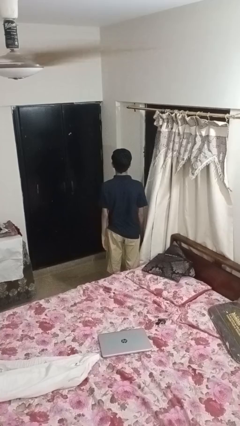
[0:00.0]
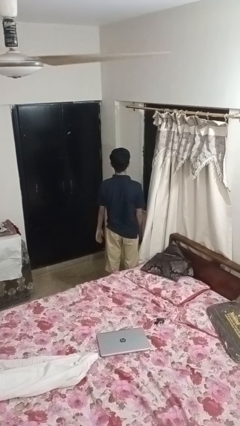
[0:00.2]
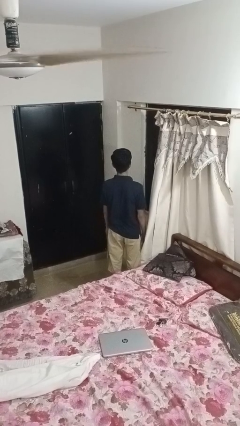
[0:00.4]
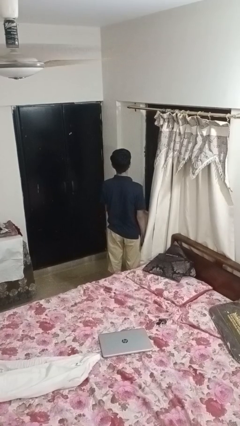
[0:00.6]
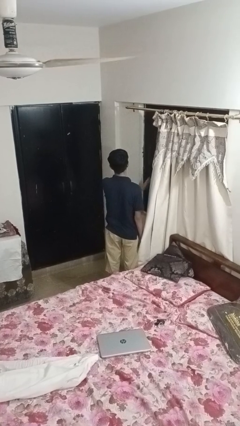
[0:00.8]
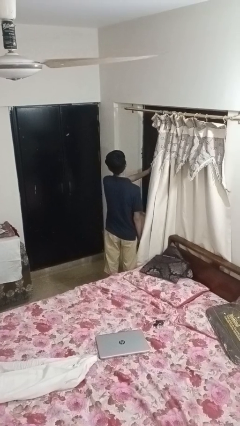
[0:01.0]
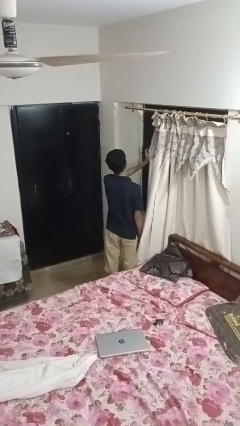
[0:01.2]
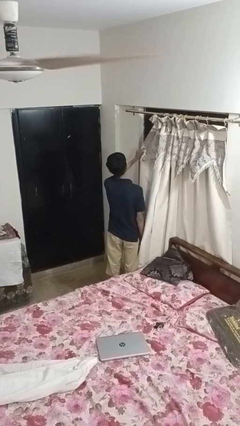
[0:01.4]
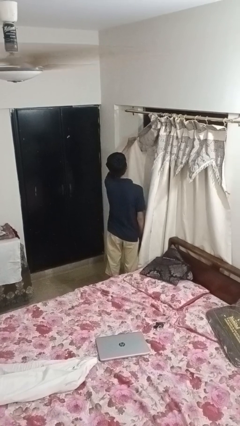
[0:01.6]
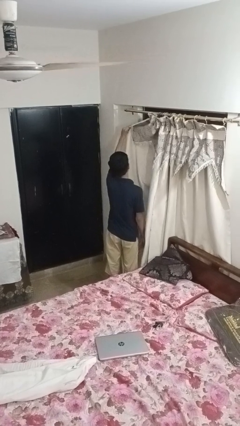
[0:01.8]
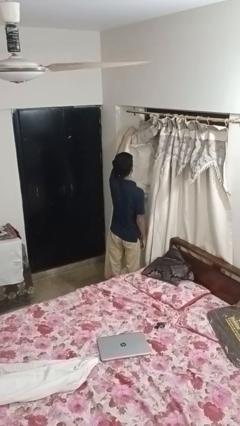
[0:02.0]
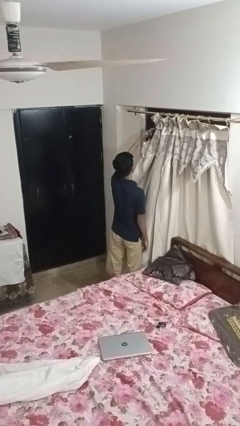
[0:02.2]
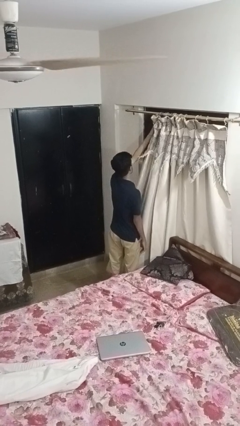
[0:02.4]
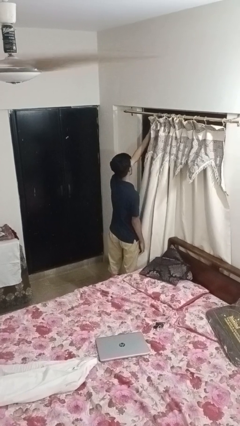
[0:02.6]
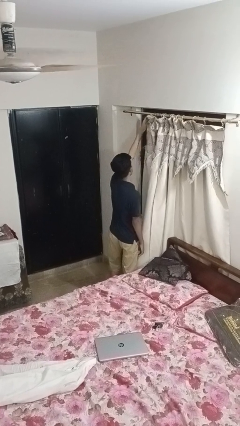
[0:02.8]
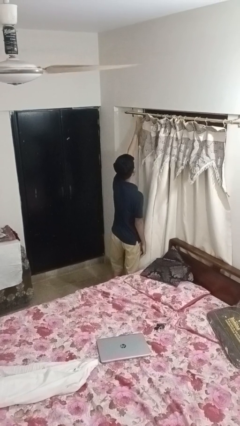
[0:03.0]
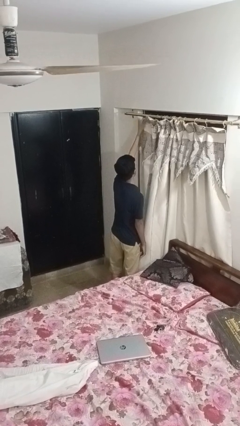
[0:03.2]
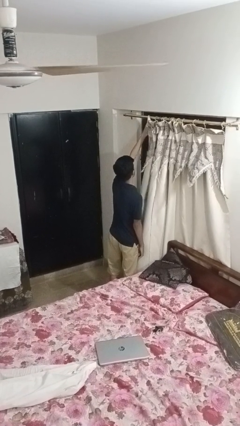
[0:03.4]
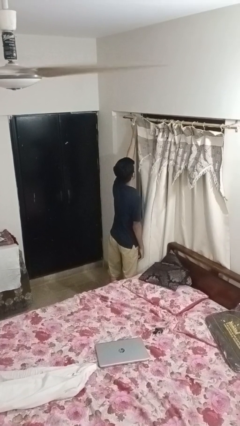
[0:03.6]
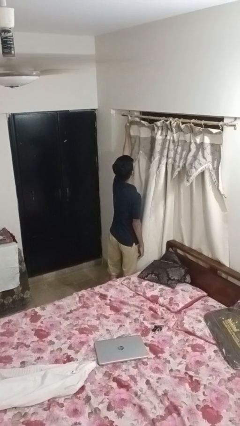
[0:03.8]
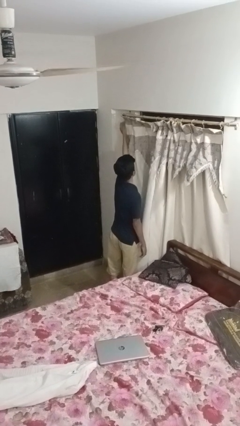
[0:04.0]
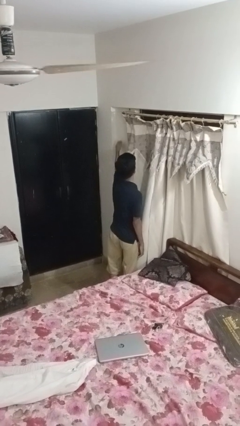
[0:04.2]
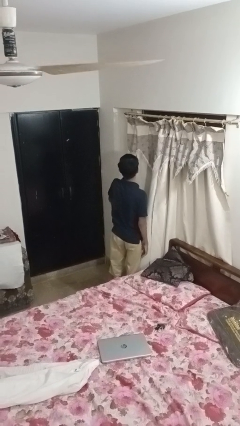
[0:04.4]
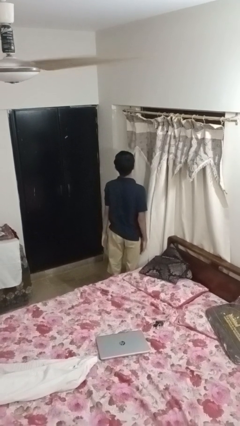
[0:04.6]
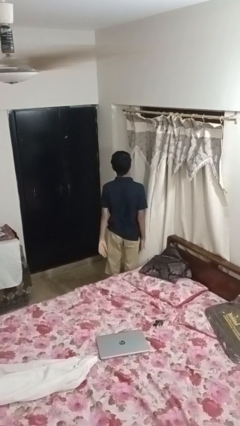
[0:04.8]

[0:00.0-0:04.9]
person closes curtains

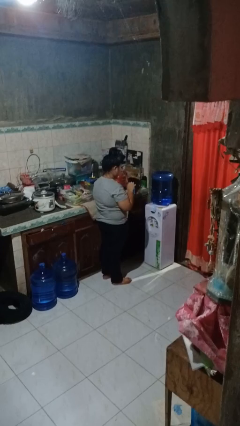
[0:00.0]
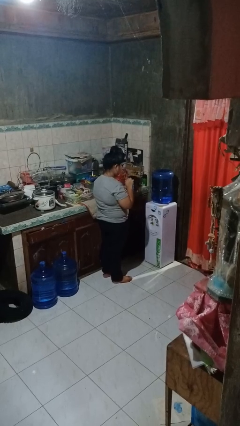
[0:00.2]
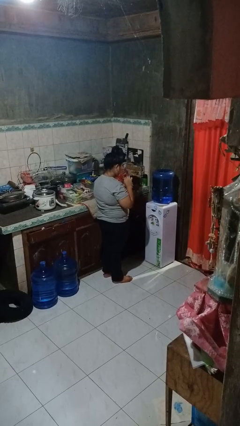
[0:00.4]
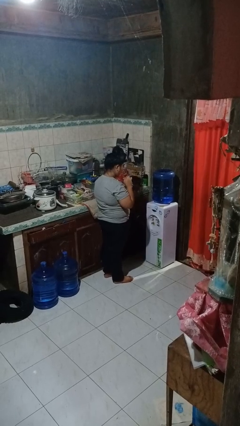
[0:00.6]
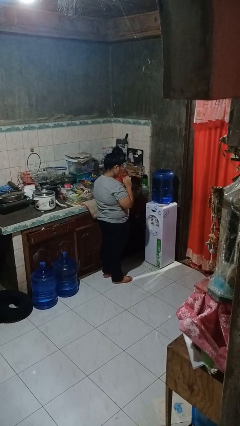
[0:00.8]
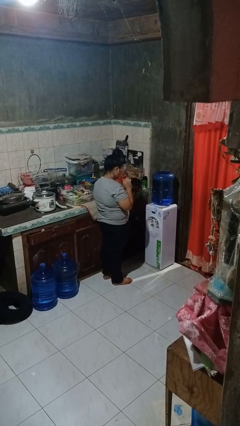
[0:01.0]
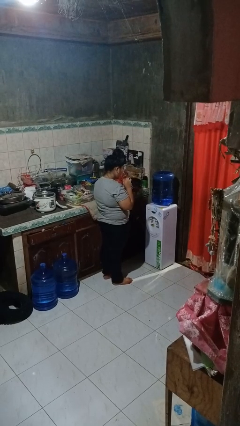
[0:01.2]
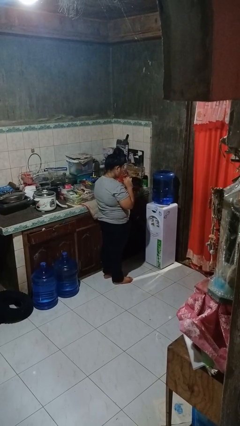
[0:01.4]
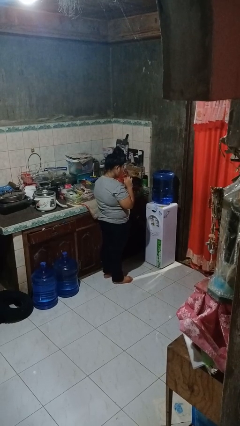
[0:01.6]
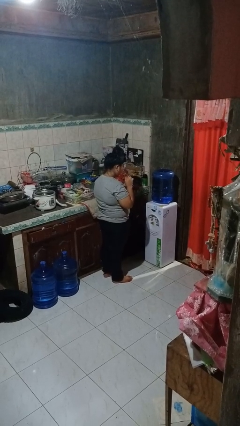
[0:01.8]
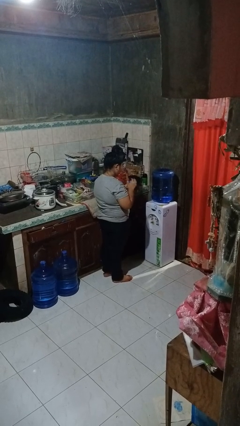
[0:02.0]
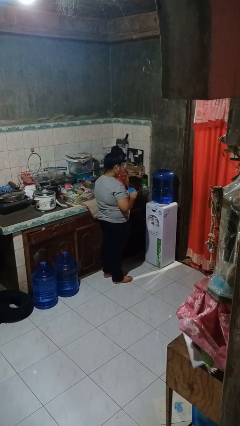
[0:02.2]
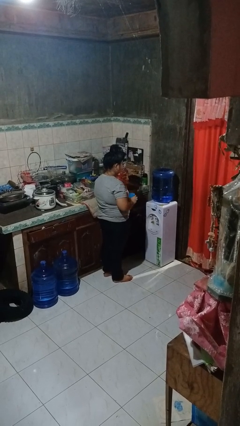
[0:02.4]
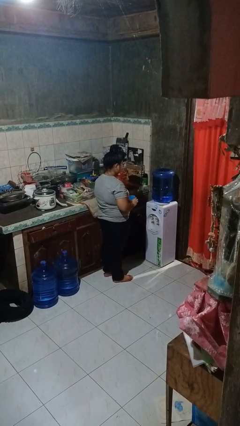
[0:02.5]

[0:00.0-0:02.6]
person drinks from straw

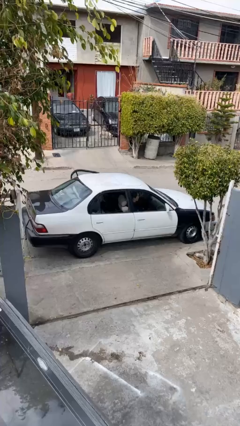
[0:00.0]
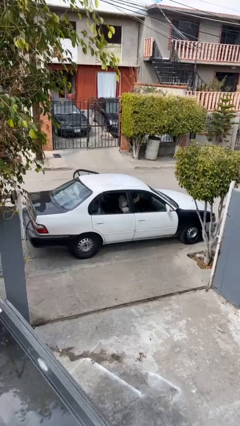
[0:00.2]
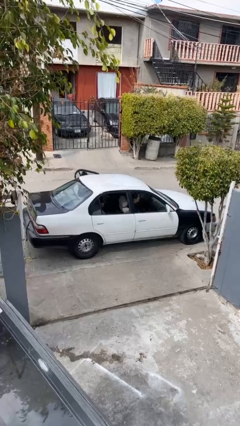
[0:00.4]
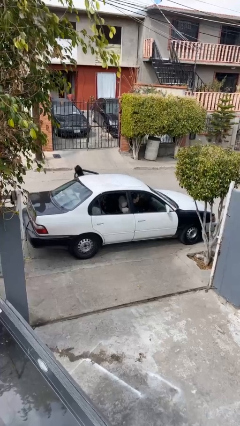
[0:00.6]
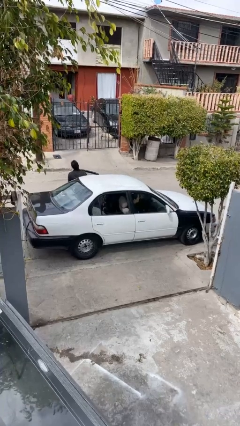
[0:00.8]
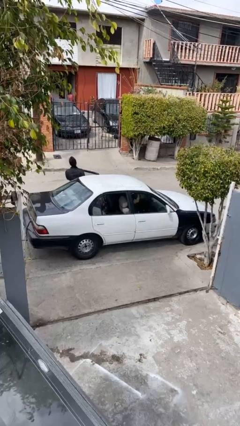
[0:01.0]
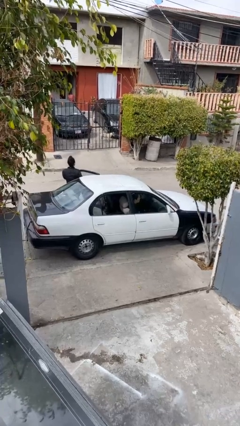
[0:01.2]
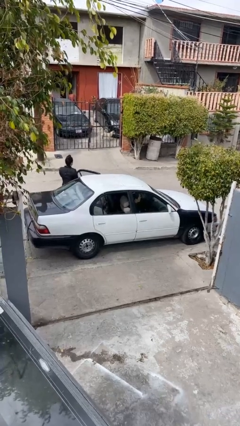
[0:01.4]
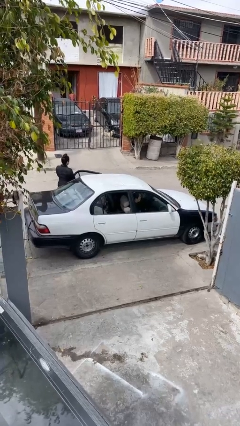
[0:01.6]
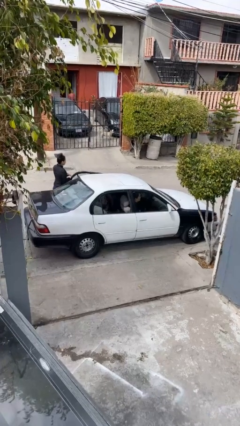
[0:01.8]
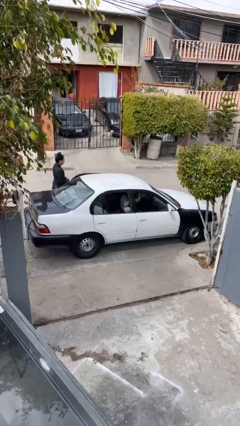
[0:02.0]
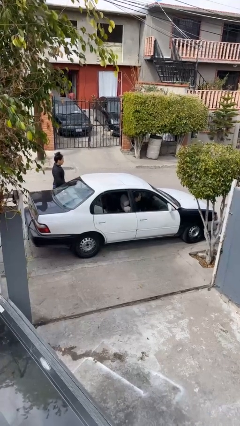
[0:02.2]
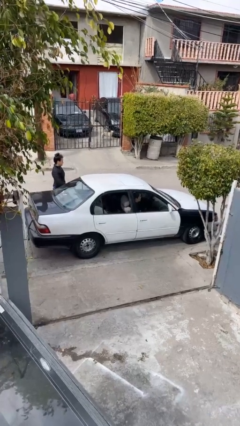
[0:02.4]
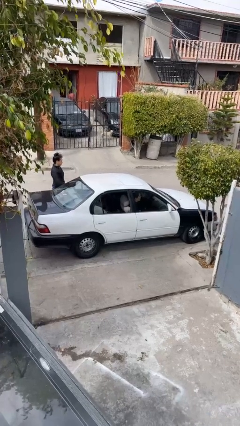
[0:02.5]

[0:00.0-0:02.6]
car drops off person

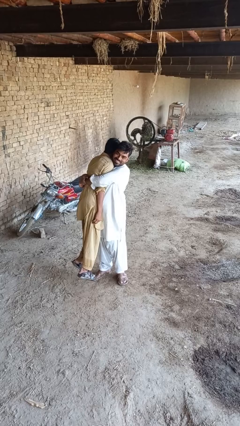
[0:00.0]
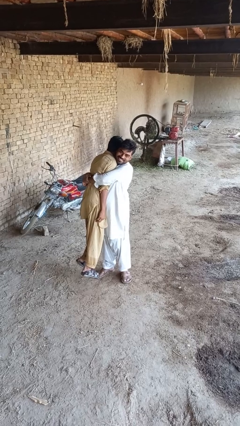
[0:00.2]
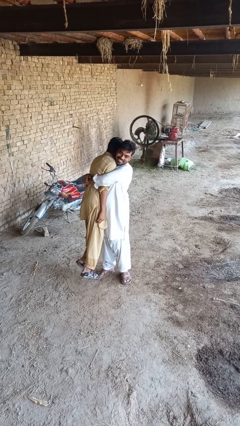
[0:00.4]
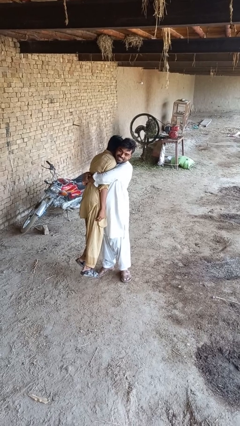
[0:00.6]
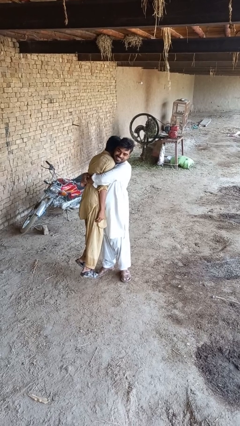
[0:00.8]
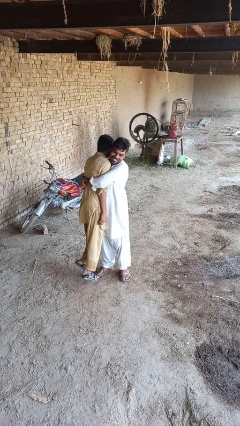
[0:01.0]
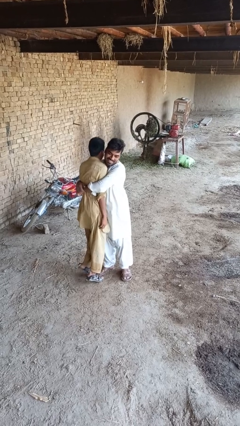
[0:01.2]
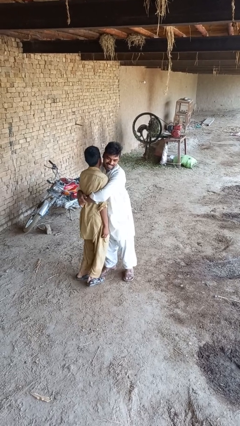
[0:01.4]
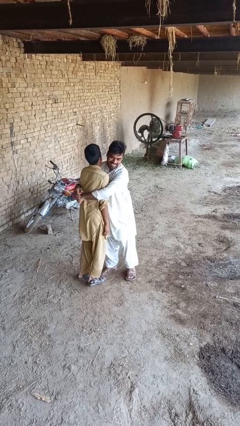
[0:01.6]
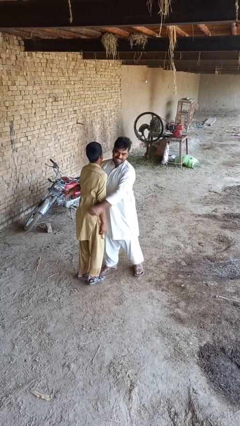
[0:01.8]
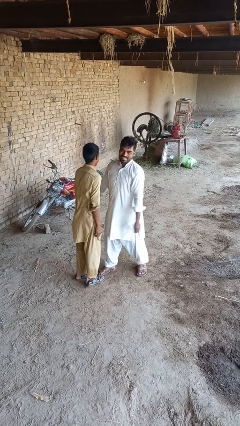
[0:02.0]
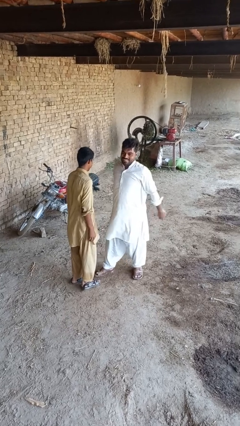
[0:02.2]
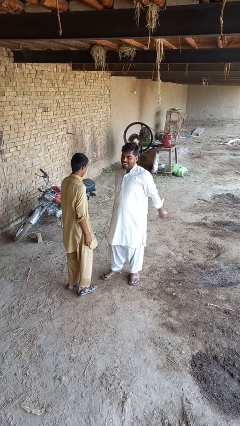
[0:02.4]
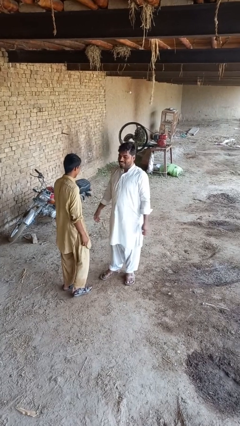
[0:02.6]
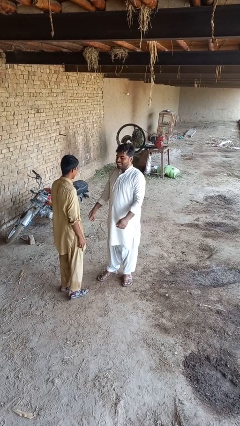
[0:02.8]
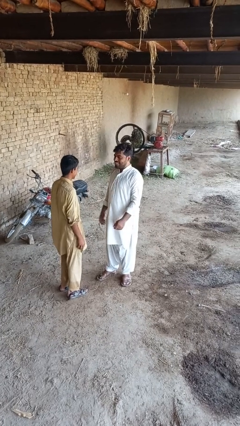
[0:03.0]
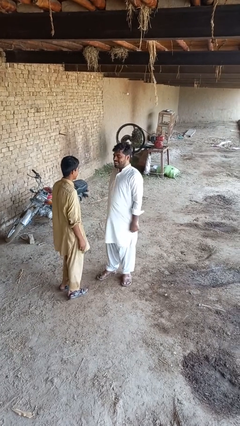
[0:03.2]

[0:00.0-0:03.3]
person puts down person

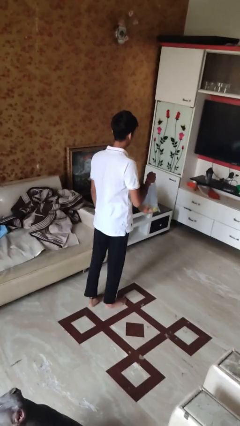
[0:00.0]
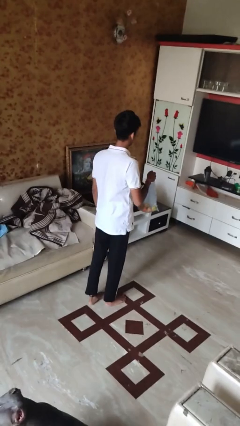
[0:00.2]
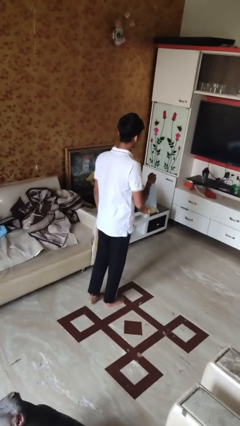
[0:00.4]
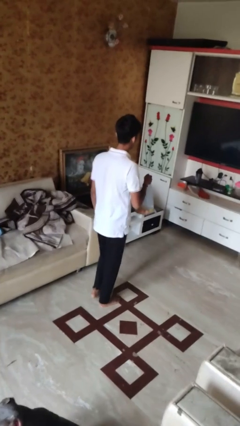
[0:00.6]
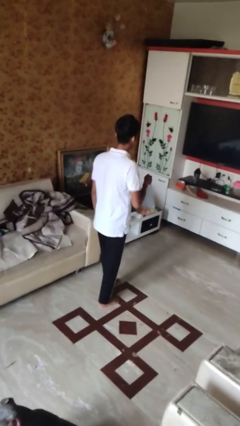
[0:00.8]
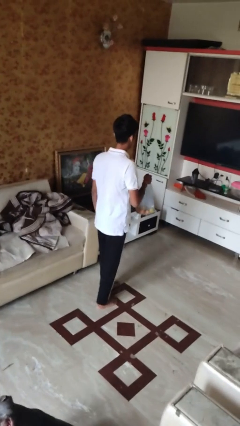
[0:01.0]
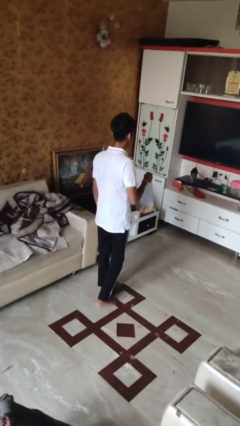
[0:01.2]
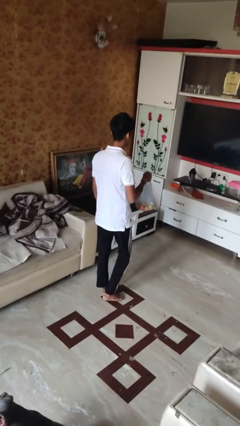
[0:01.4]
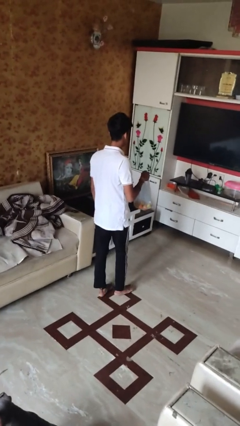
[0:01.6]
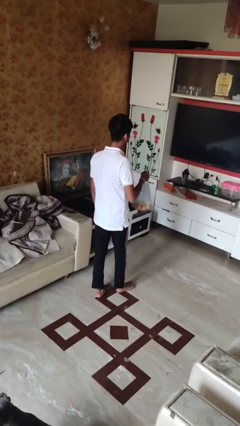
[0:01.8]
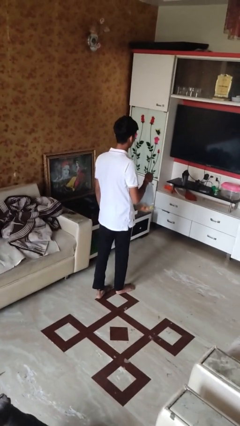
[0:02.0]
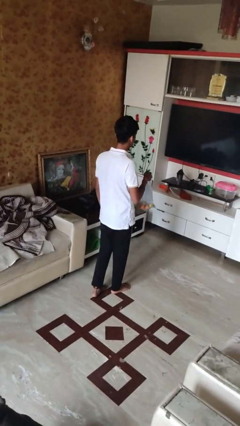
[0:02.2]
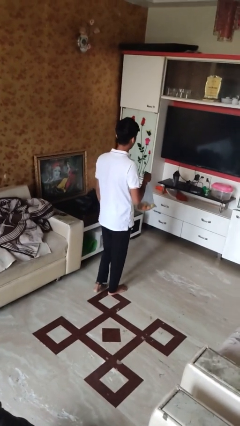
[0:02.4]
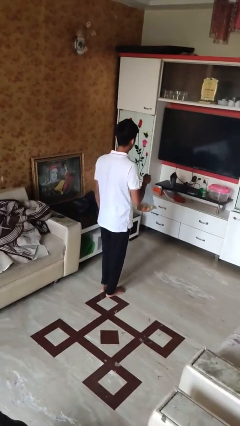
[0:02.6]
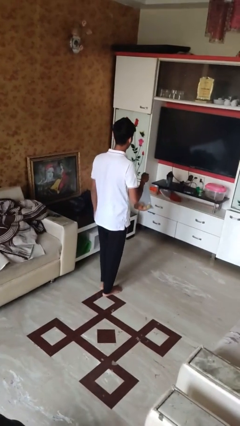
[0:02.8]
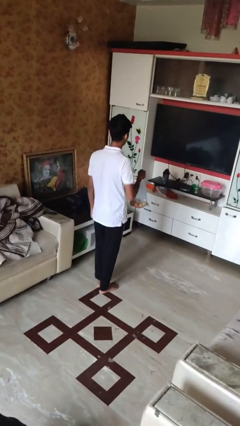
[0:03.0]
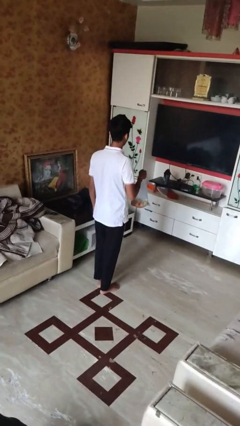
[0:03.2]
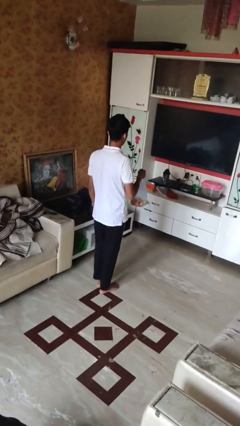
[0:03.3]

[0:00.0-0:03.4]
person carries groceries

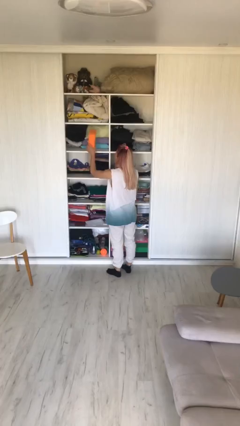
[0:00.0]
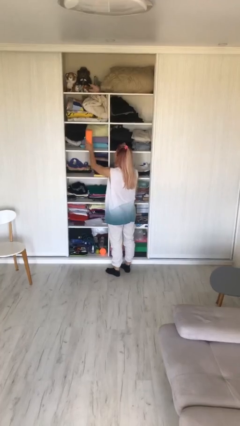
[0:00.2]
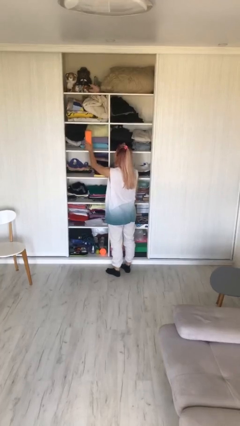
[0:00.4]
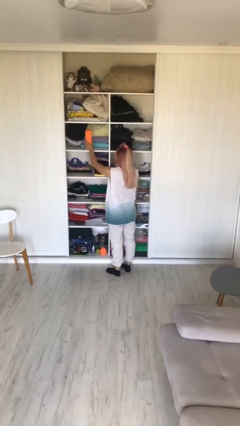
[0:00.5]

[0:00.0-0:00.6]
person puts down object on shelf

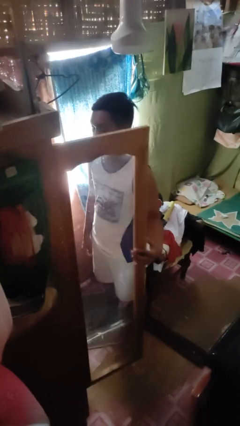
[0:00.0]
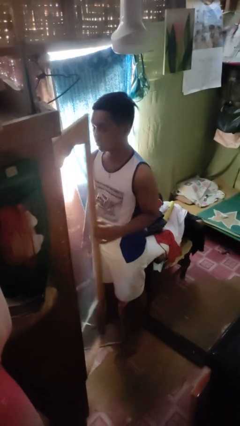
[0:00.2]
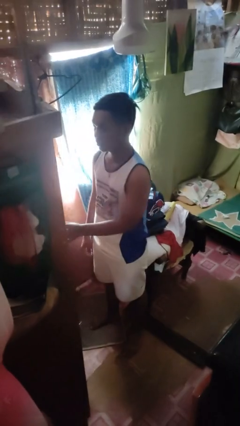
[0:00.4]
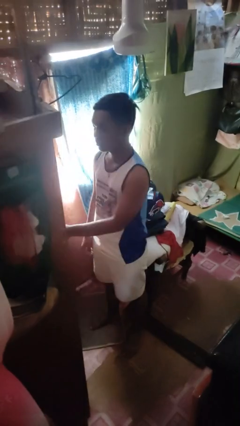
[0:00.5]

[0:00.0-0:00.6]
person closes closet door
